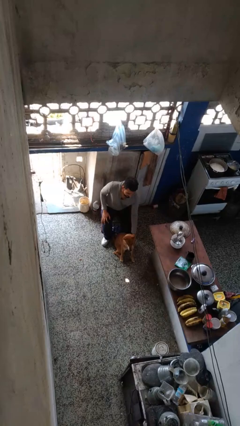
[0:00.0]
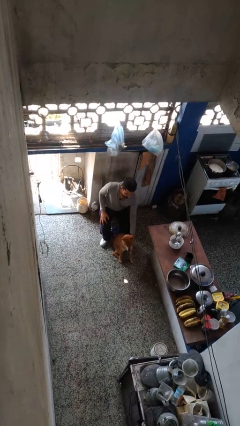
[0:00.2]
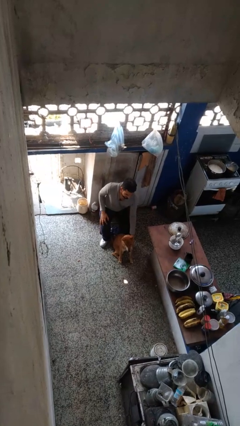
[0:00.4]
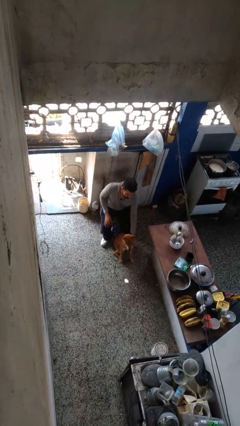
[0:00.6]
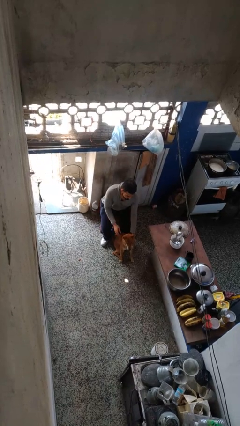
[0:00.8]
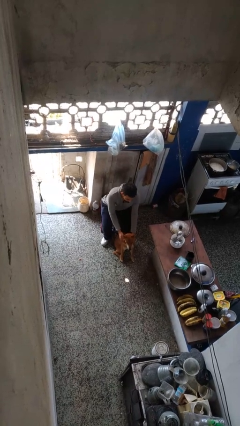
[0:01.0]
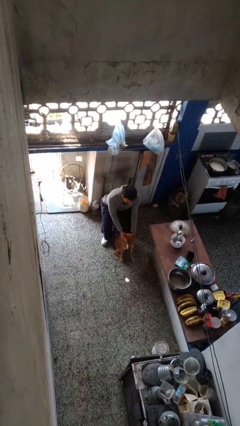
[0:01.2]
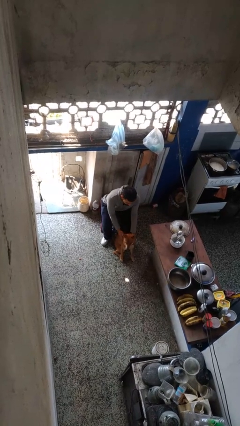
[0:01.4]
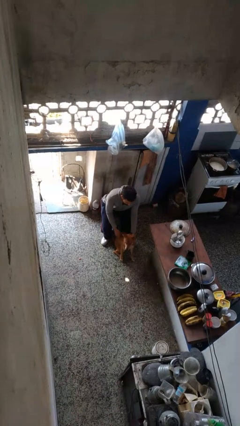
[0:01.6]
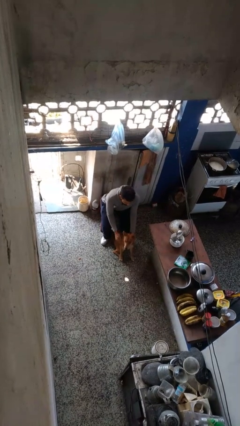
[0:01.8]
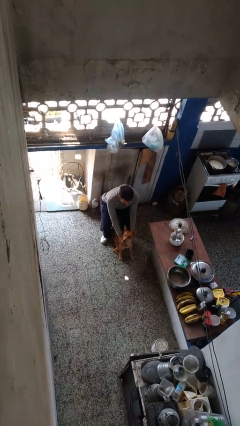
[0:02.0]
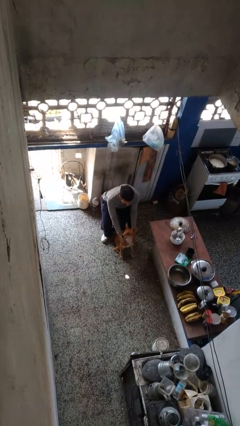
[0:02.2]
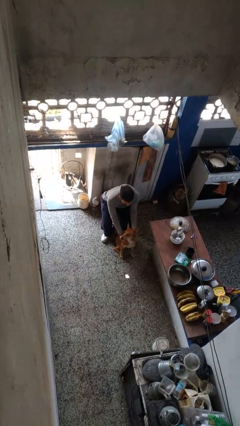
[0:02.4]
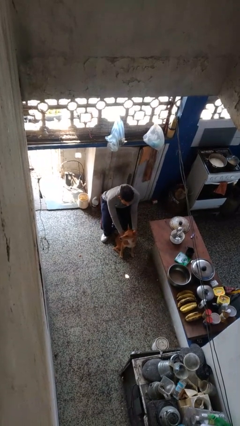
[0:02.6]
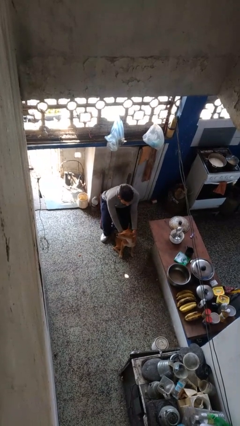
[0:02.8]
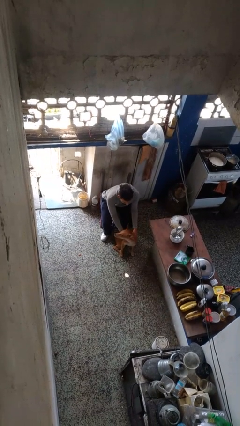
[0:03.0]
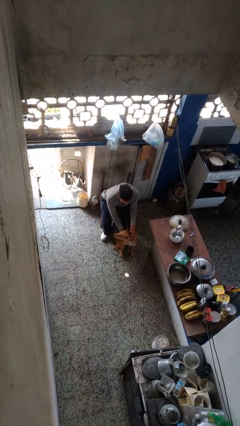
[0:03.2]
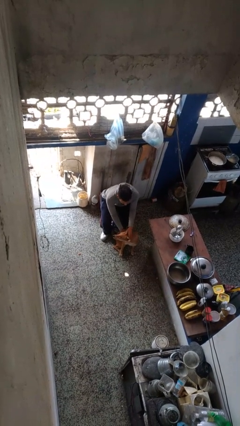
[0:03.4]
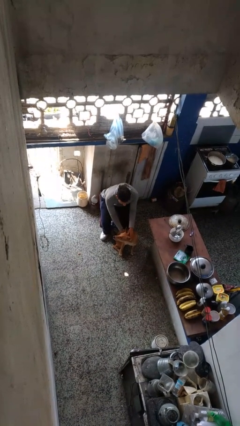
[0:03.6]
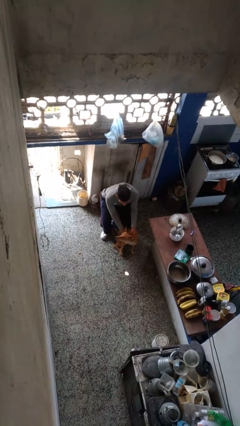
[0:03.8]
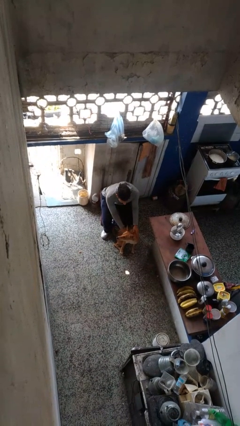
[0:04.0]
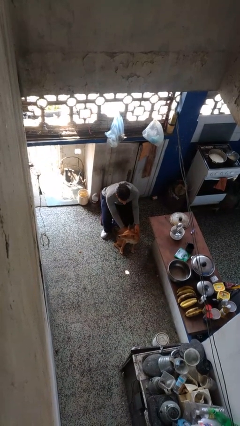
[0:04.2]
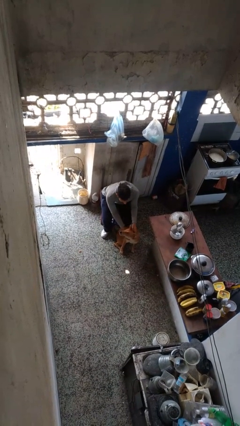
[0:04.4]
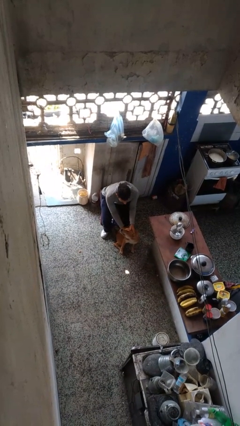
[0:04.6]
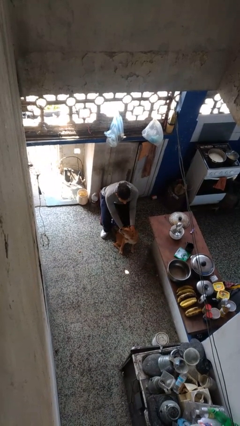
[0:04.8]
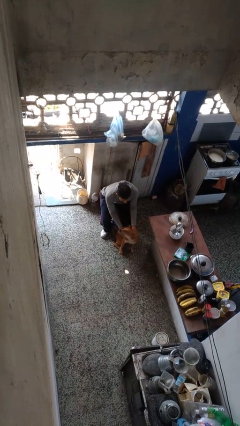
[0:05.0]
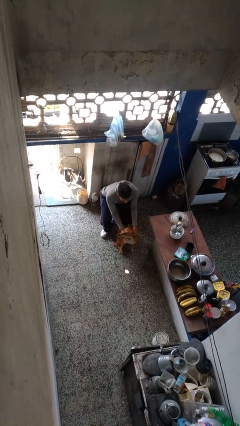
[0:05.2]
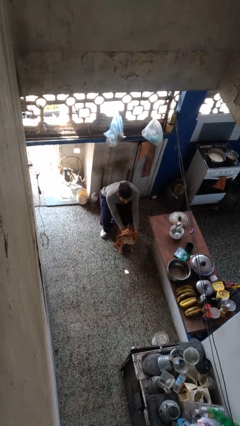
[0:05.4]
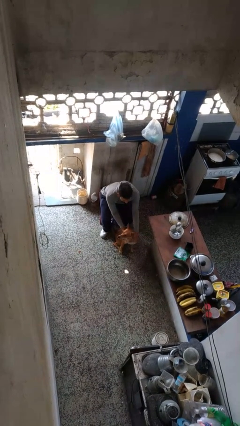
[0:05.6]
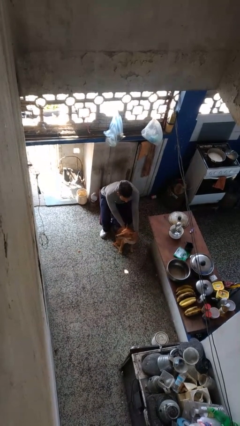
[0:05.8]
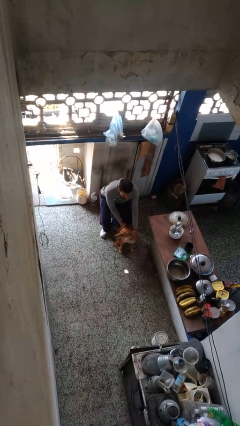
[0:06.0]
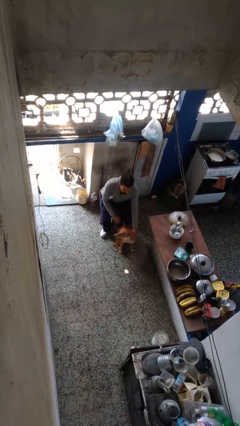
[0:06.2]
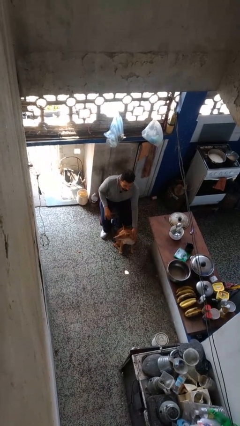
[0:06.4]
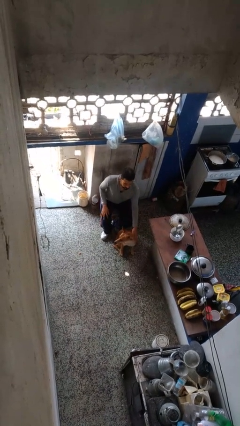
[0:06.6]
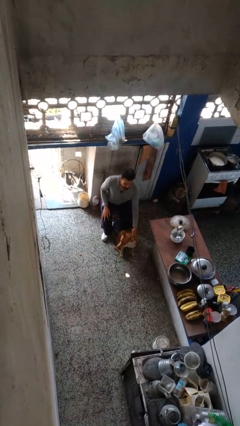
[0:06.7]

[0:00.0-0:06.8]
person pets dog

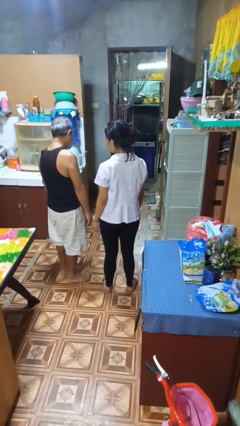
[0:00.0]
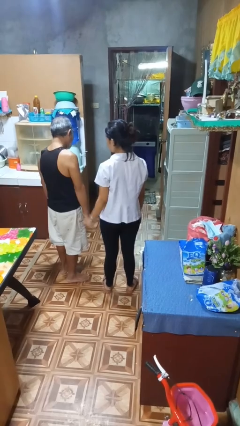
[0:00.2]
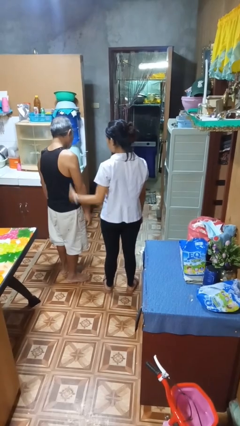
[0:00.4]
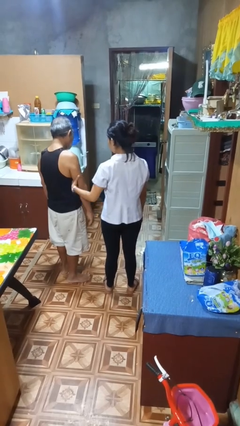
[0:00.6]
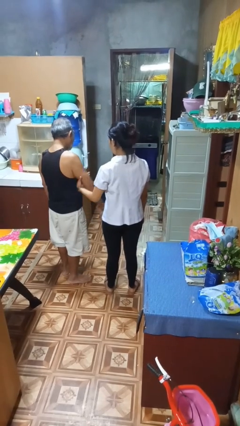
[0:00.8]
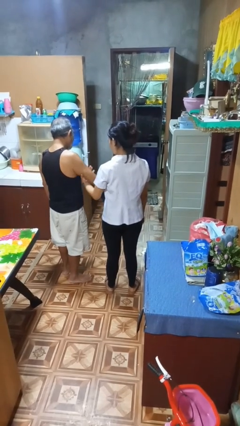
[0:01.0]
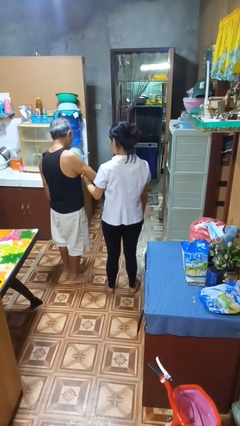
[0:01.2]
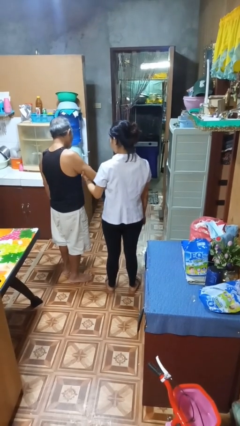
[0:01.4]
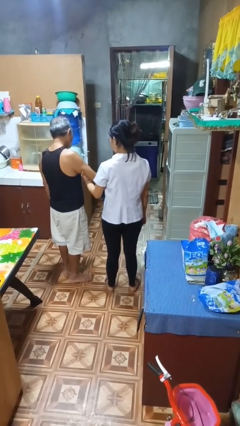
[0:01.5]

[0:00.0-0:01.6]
person grabs person by bicep

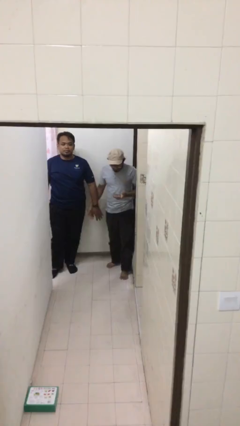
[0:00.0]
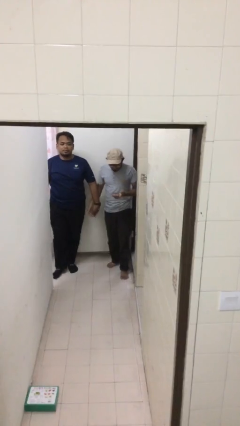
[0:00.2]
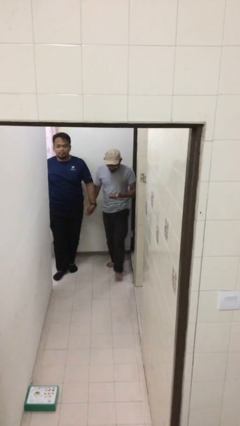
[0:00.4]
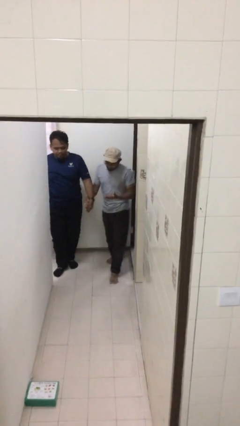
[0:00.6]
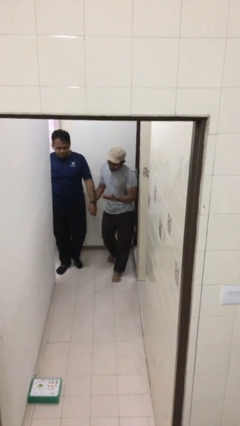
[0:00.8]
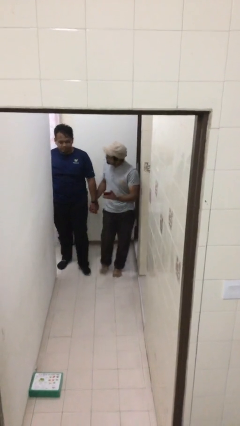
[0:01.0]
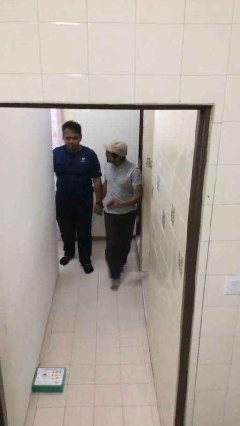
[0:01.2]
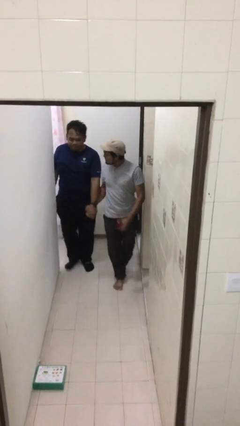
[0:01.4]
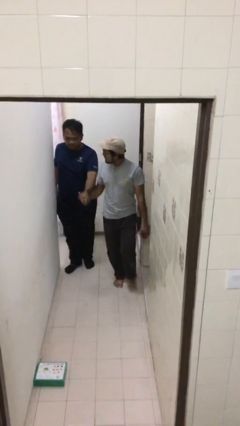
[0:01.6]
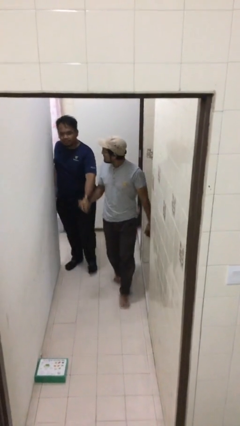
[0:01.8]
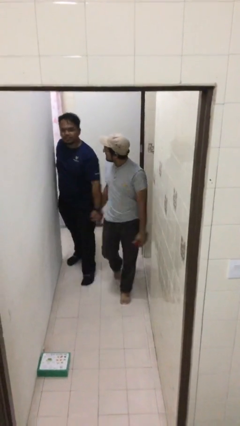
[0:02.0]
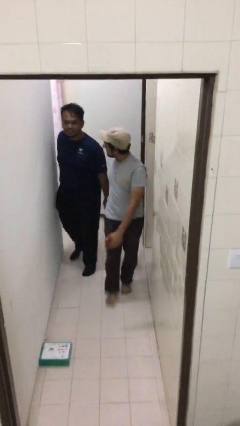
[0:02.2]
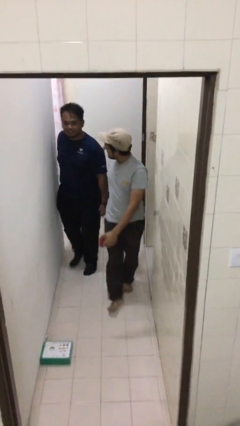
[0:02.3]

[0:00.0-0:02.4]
person holds hand

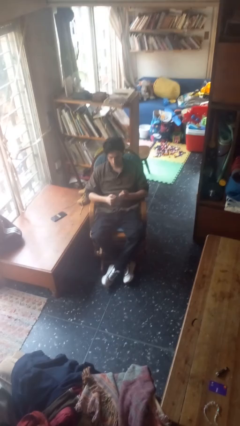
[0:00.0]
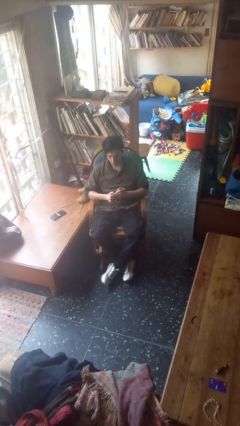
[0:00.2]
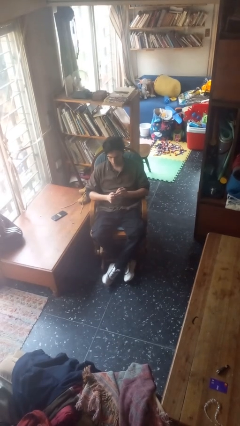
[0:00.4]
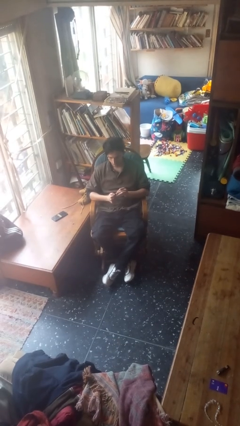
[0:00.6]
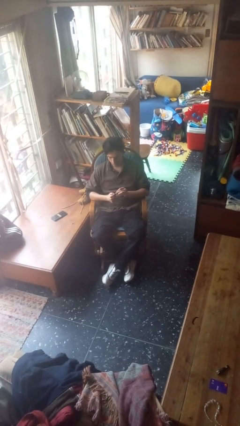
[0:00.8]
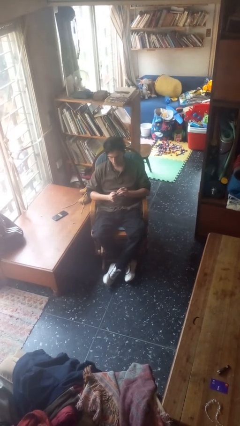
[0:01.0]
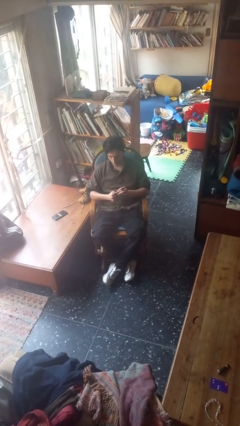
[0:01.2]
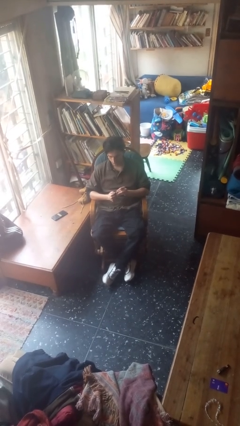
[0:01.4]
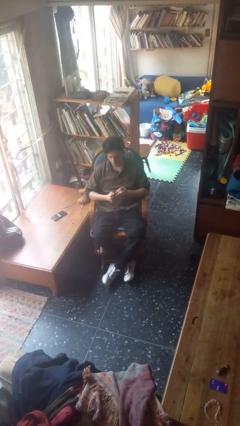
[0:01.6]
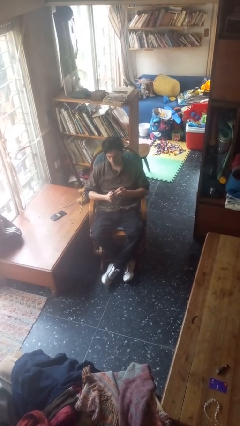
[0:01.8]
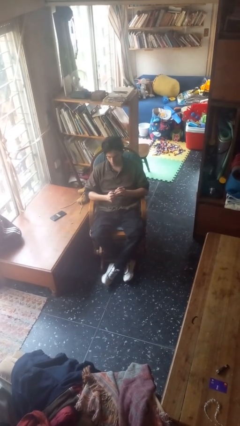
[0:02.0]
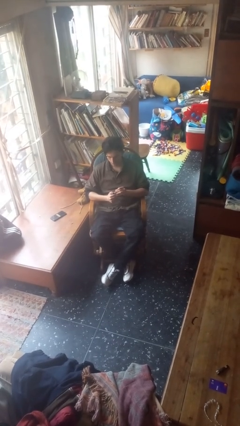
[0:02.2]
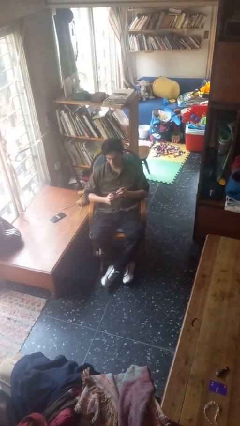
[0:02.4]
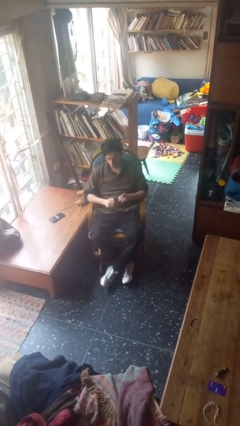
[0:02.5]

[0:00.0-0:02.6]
person files fingernails

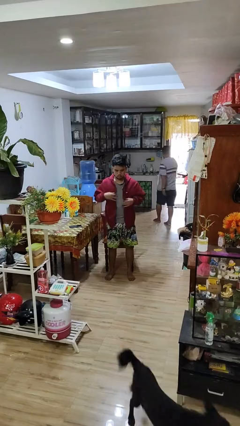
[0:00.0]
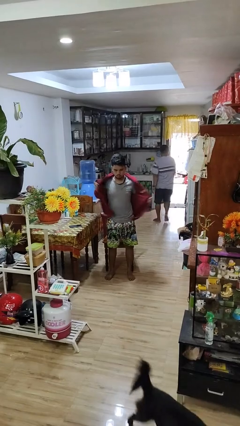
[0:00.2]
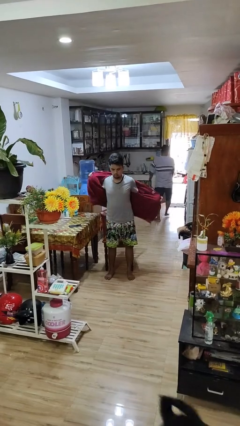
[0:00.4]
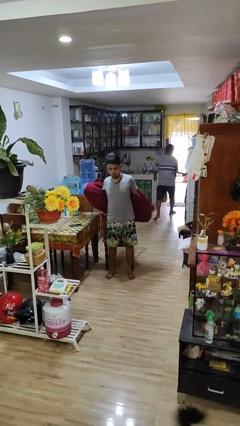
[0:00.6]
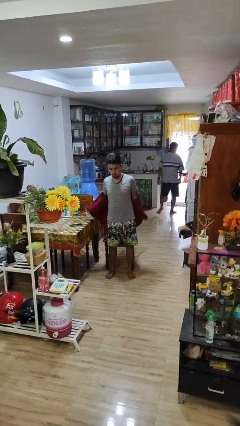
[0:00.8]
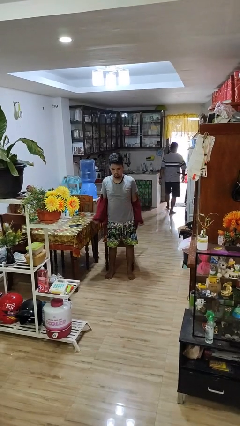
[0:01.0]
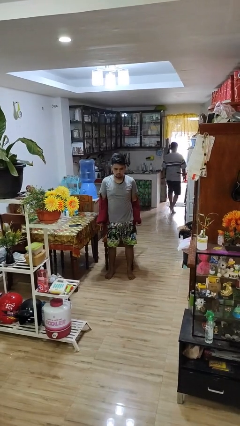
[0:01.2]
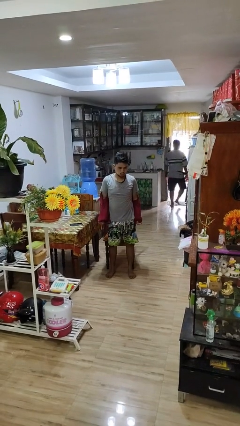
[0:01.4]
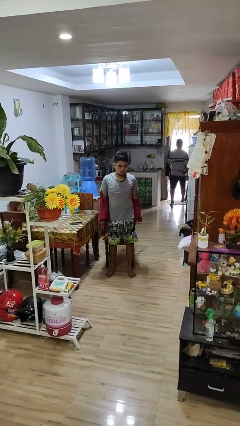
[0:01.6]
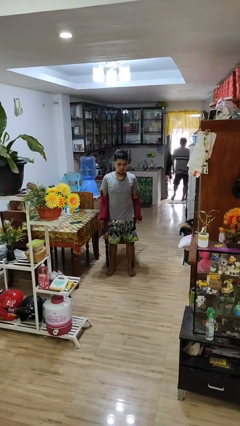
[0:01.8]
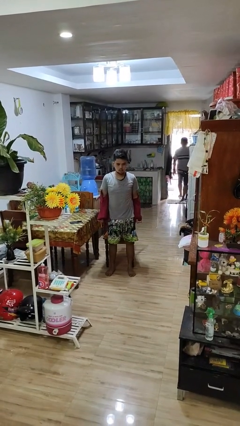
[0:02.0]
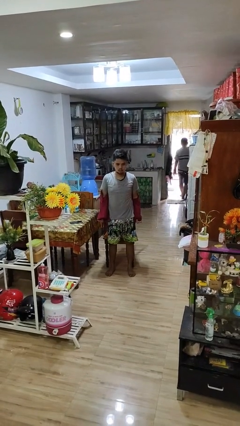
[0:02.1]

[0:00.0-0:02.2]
person takes off jacket

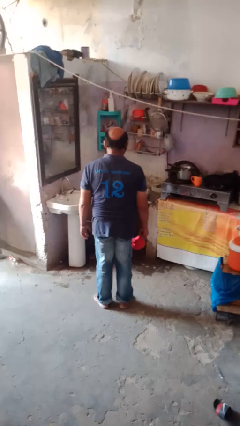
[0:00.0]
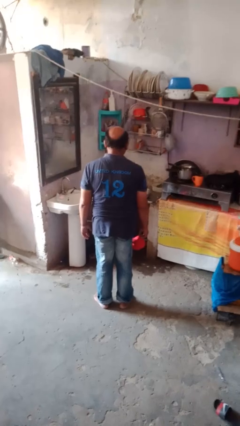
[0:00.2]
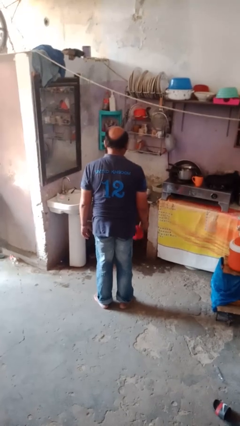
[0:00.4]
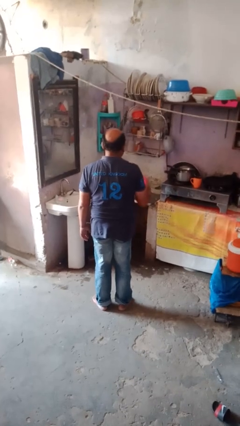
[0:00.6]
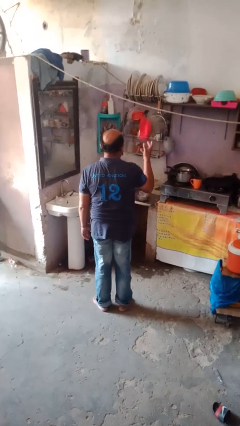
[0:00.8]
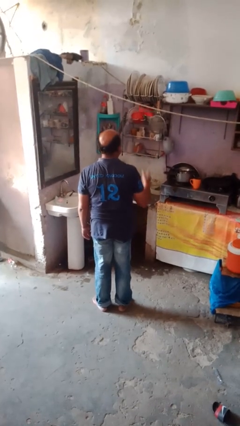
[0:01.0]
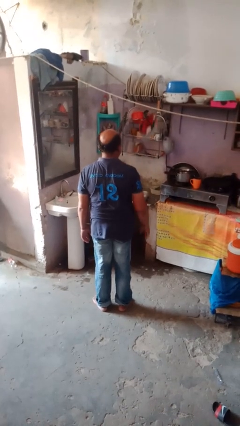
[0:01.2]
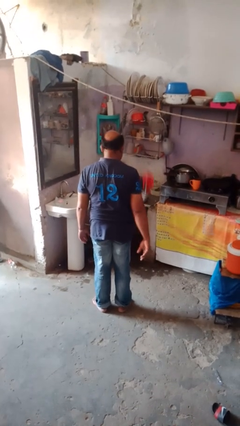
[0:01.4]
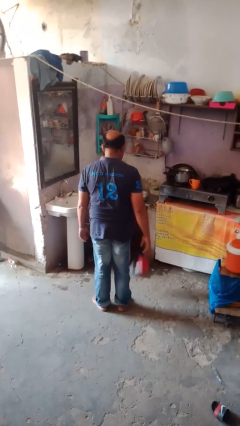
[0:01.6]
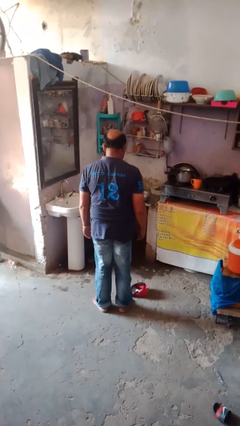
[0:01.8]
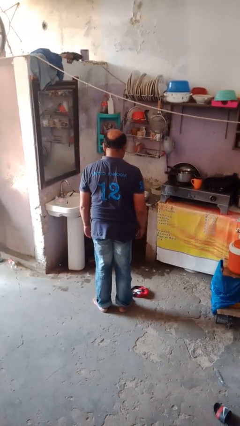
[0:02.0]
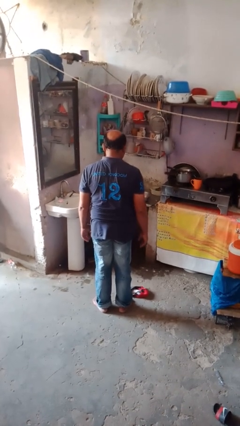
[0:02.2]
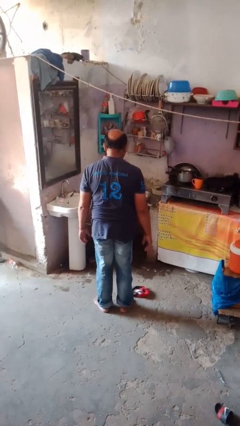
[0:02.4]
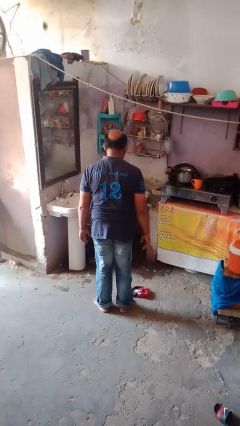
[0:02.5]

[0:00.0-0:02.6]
person throws object into air
